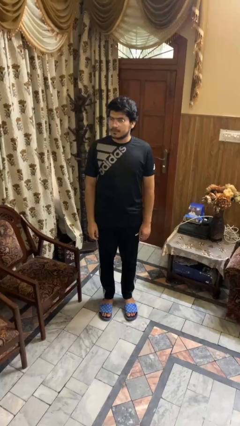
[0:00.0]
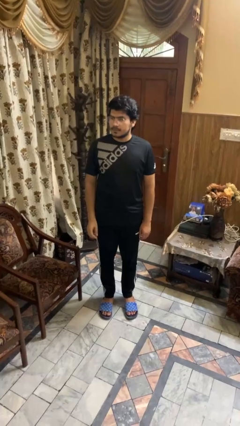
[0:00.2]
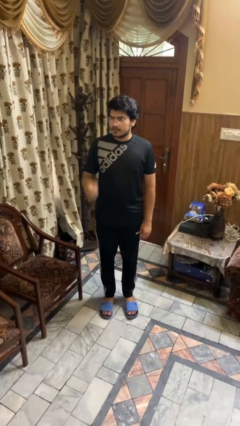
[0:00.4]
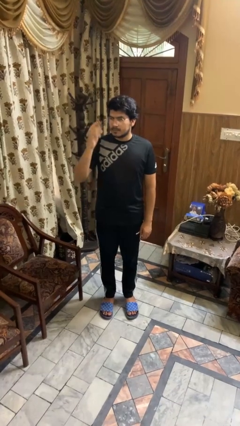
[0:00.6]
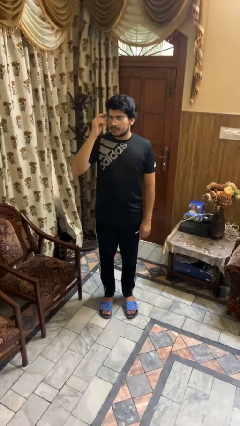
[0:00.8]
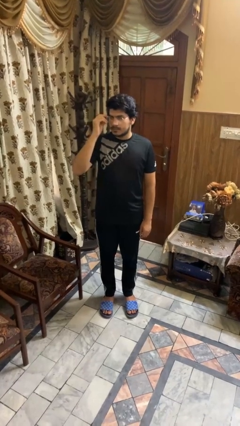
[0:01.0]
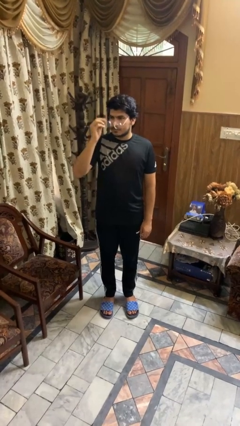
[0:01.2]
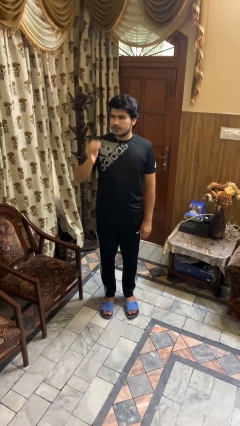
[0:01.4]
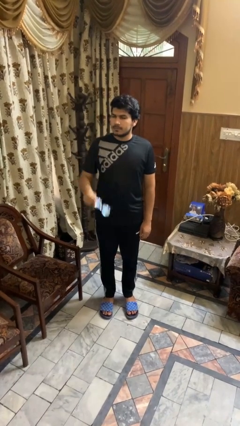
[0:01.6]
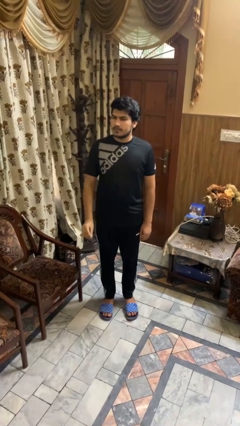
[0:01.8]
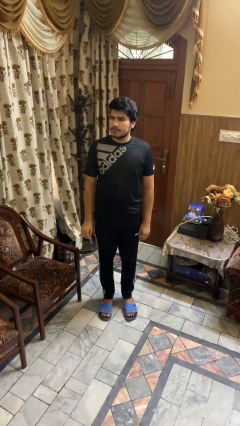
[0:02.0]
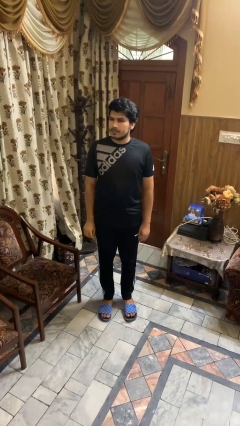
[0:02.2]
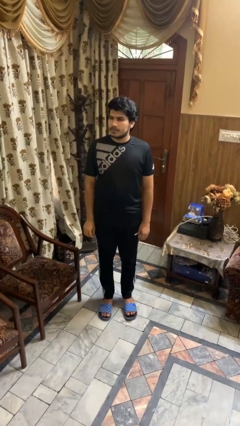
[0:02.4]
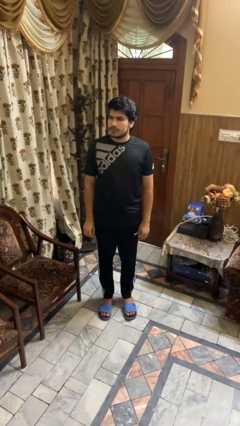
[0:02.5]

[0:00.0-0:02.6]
person takes off glasses

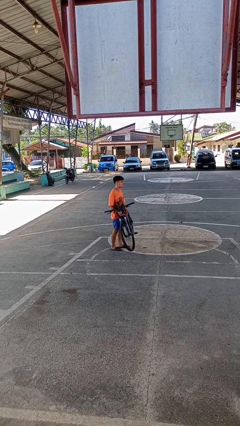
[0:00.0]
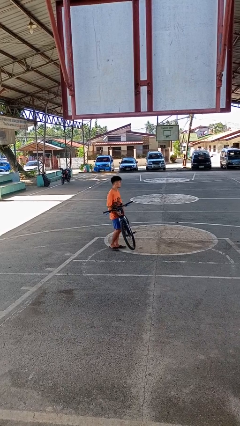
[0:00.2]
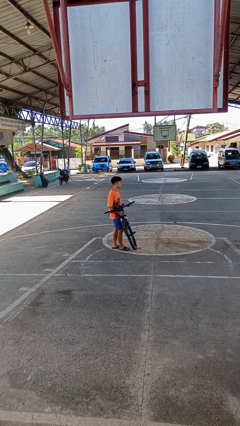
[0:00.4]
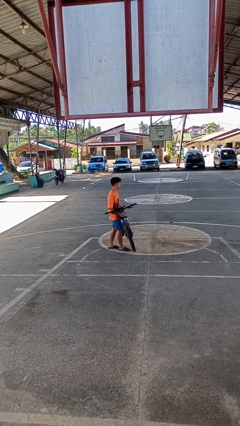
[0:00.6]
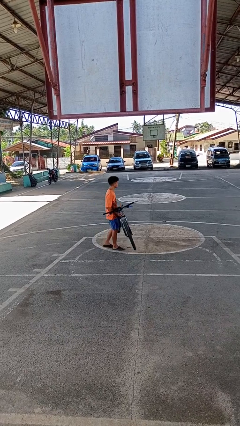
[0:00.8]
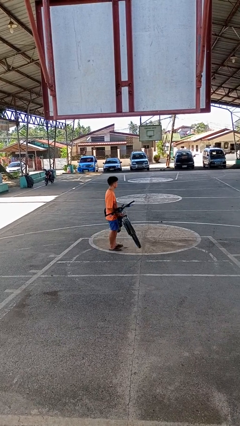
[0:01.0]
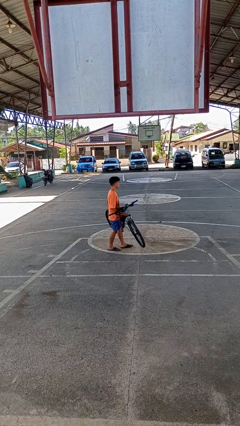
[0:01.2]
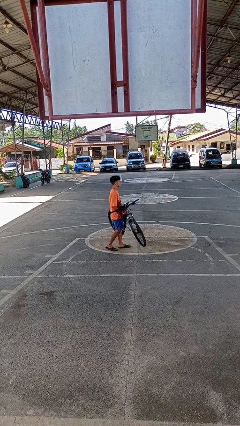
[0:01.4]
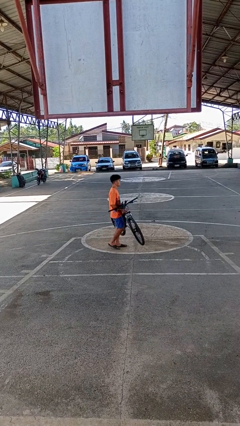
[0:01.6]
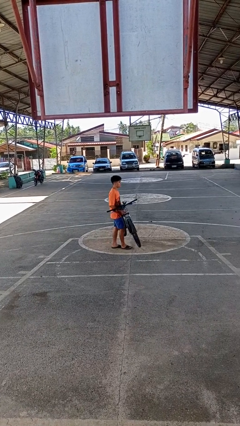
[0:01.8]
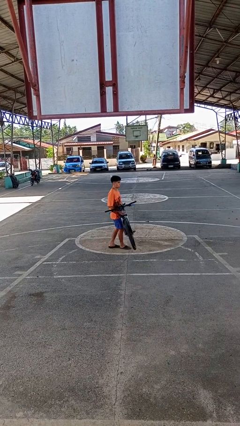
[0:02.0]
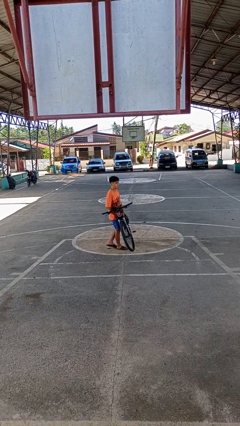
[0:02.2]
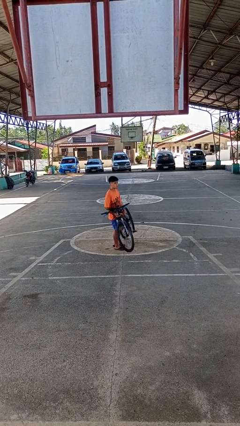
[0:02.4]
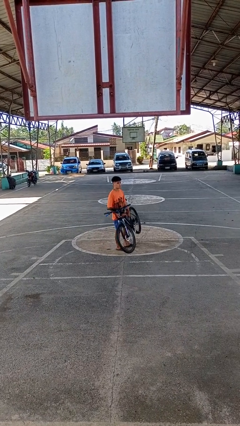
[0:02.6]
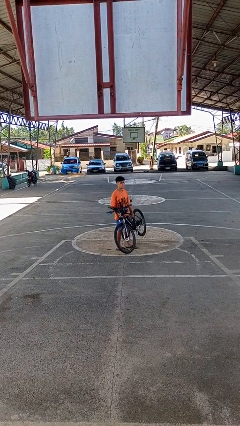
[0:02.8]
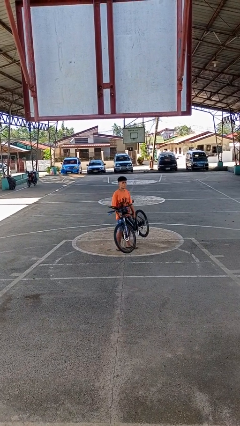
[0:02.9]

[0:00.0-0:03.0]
person carries bicycle

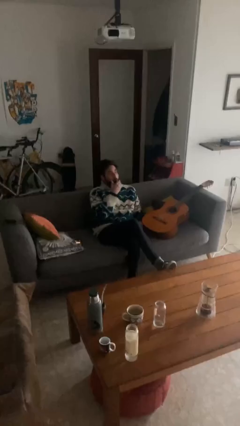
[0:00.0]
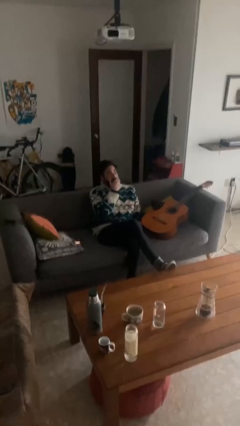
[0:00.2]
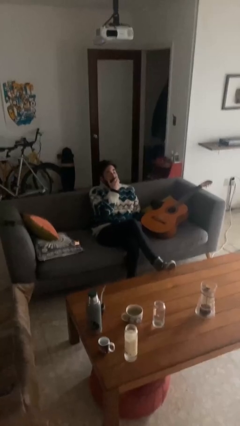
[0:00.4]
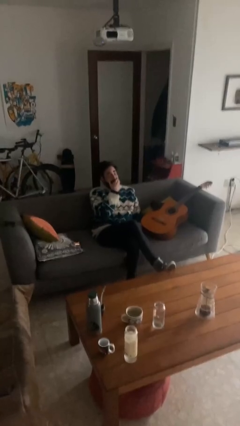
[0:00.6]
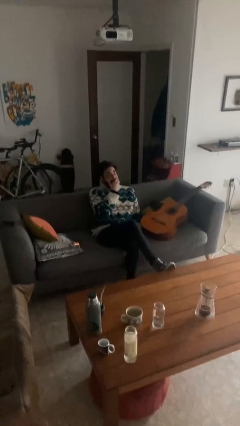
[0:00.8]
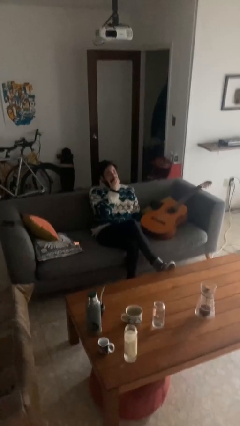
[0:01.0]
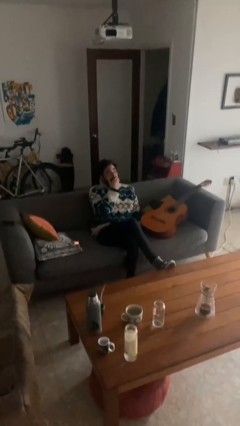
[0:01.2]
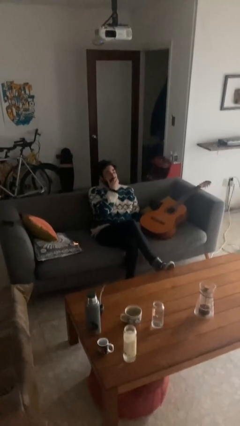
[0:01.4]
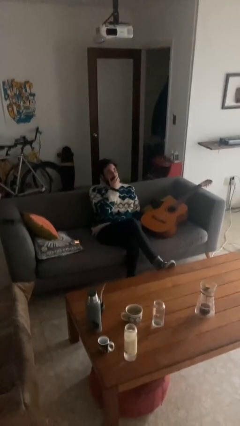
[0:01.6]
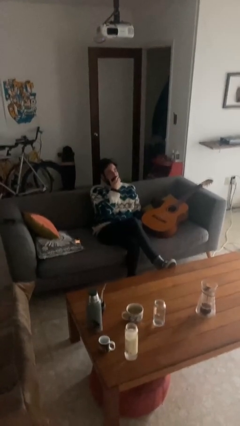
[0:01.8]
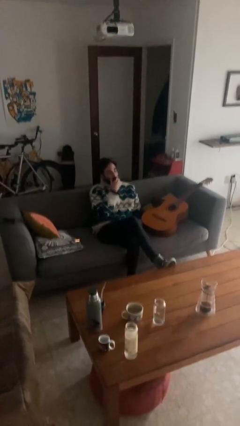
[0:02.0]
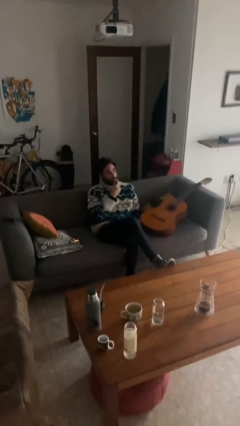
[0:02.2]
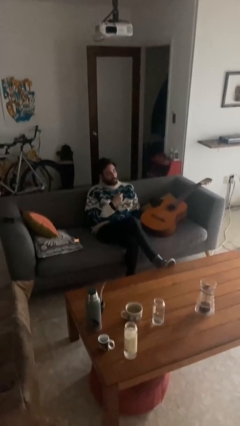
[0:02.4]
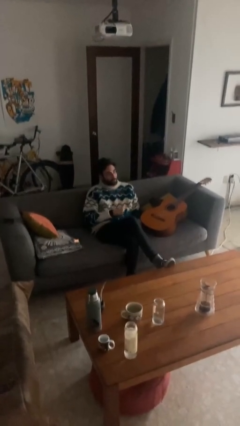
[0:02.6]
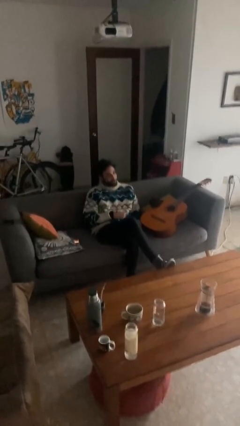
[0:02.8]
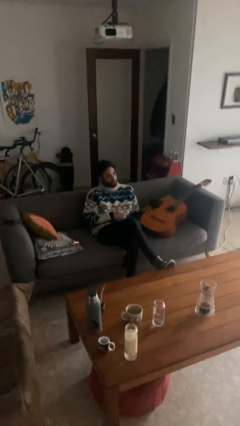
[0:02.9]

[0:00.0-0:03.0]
person yawns

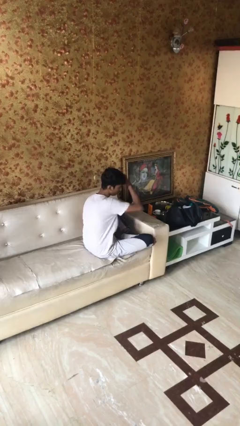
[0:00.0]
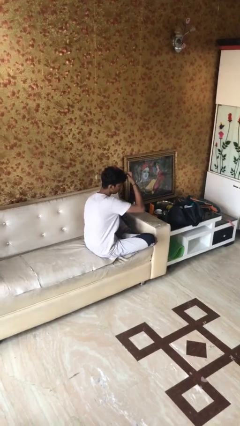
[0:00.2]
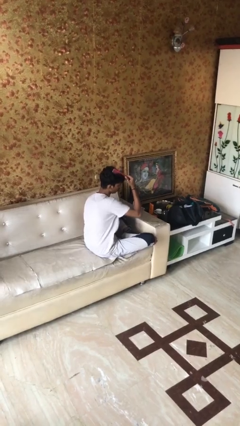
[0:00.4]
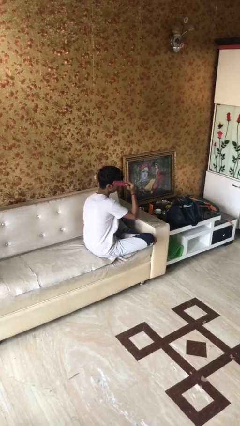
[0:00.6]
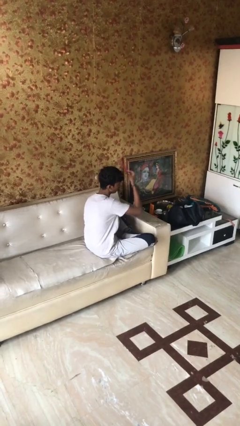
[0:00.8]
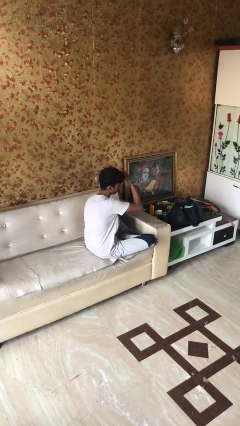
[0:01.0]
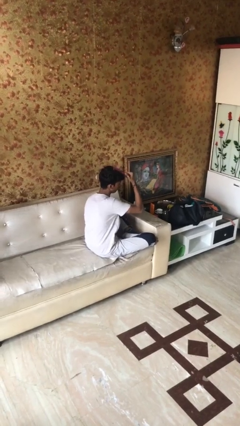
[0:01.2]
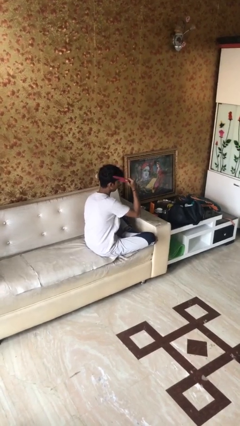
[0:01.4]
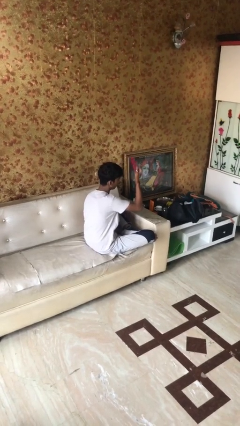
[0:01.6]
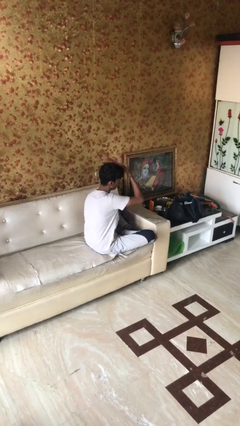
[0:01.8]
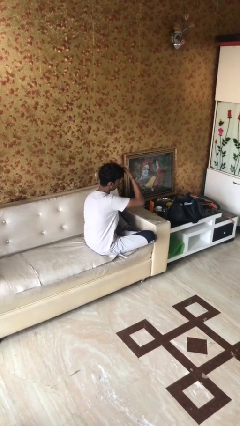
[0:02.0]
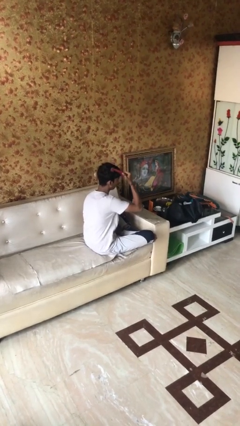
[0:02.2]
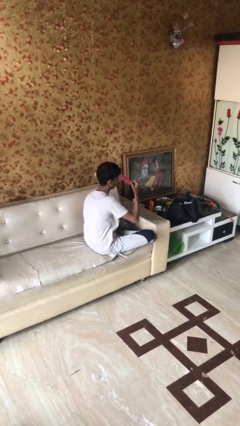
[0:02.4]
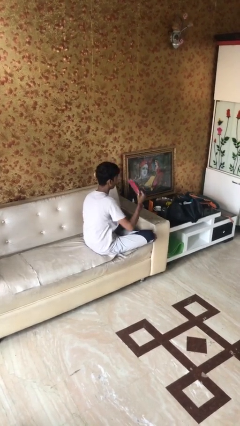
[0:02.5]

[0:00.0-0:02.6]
person brushes hair

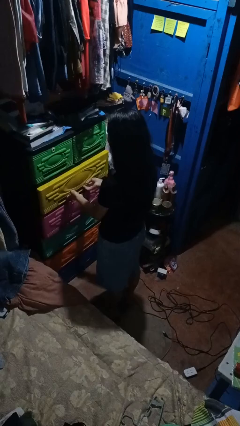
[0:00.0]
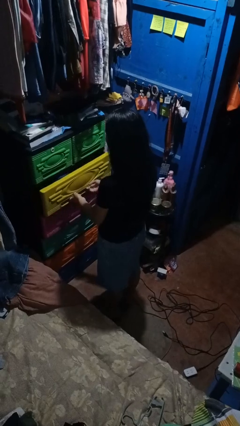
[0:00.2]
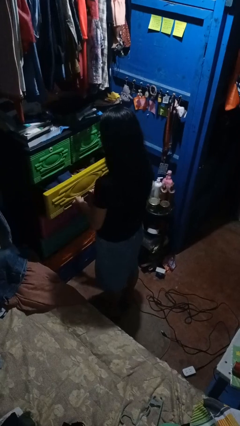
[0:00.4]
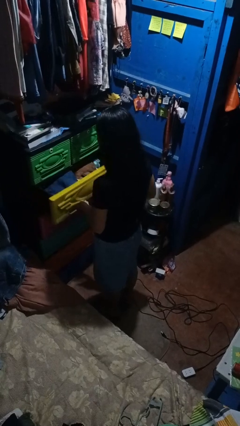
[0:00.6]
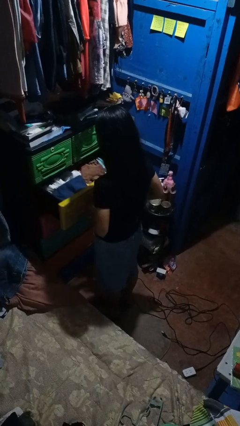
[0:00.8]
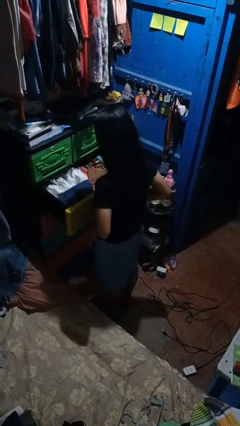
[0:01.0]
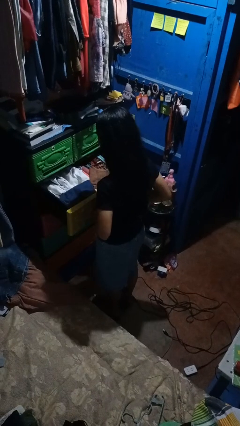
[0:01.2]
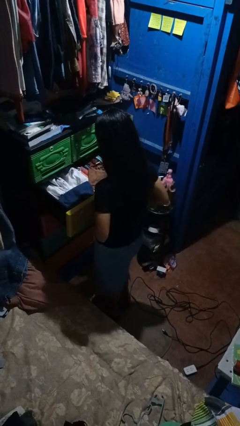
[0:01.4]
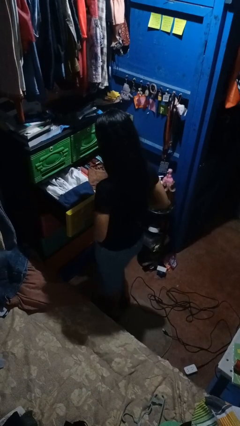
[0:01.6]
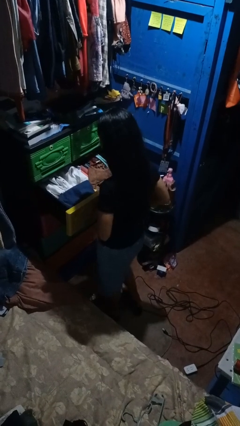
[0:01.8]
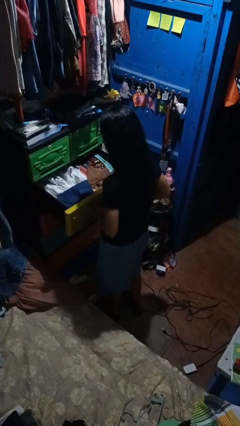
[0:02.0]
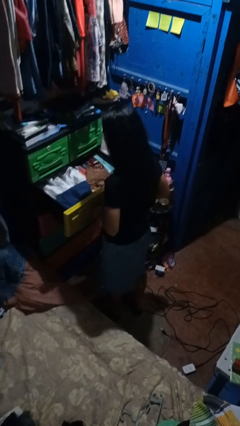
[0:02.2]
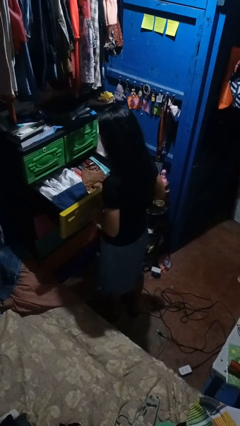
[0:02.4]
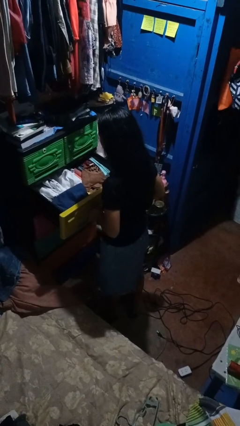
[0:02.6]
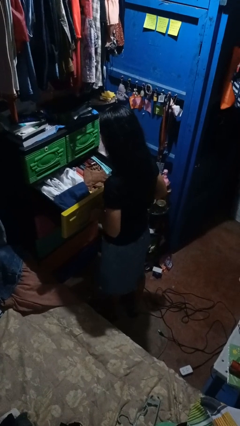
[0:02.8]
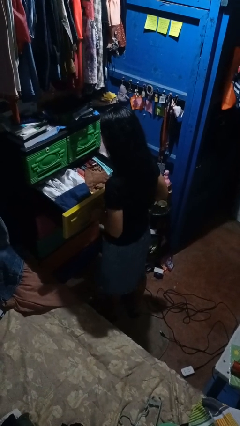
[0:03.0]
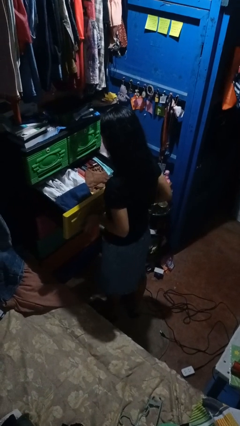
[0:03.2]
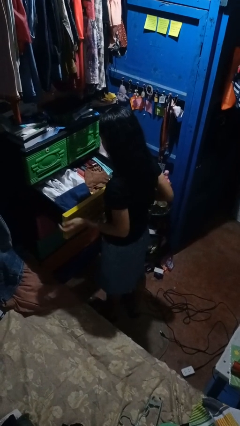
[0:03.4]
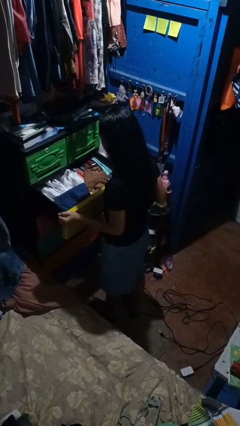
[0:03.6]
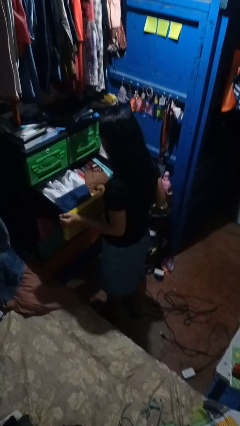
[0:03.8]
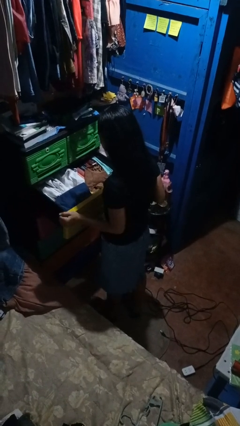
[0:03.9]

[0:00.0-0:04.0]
person opens dresser drawer

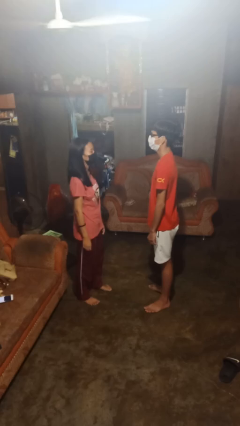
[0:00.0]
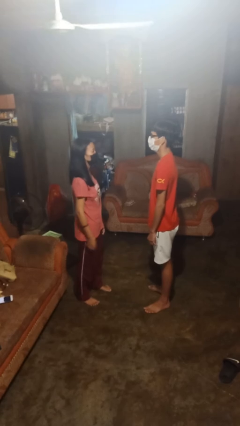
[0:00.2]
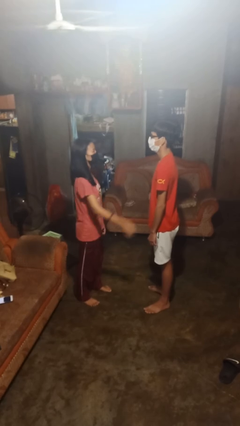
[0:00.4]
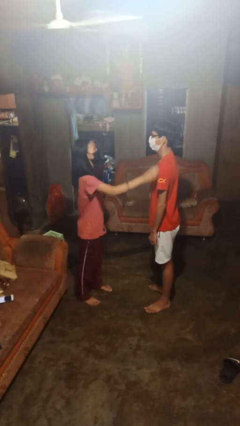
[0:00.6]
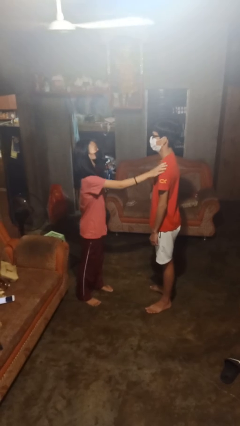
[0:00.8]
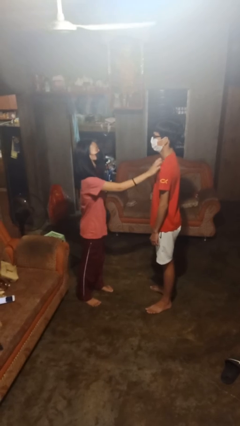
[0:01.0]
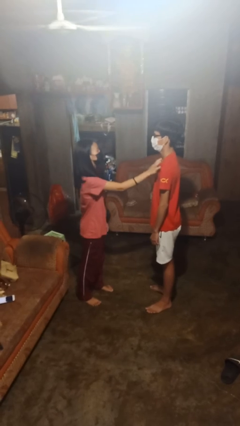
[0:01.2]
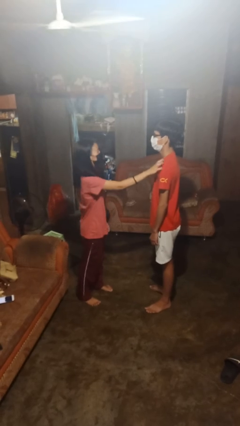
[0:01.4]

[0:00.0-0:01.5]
person pounds shoulders of person

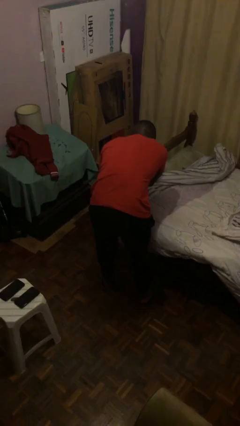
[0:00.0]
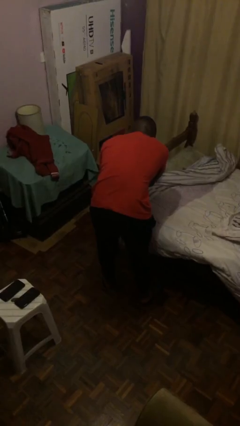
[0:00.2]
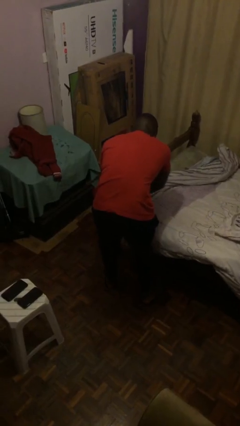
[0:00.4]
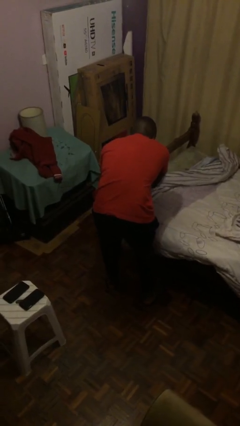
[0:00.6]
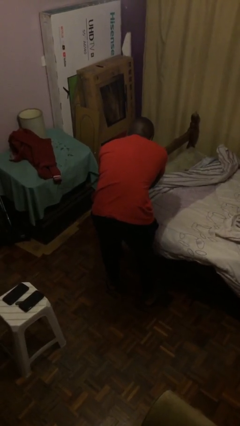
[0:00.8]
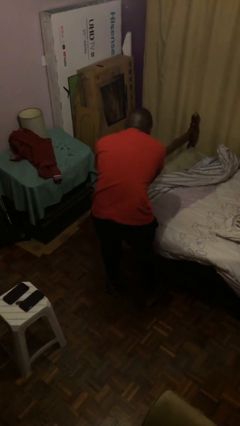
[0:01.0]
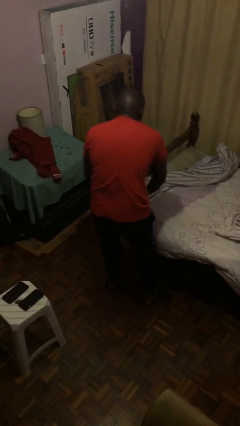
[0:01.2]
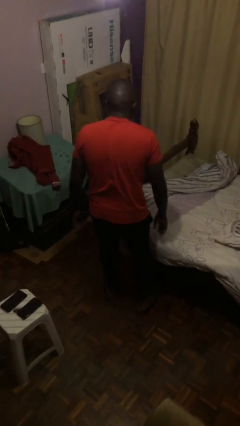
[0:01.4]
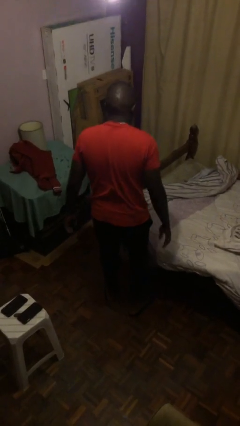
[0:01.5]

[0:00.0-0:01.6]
person makes bed
